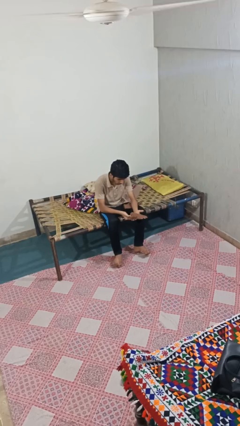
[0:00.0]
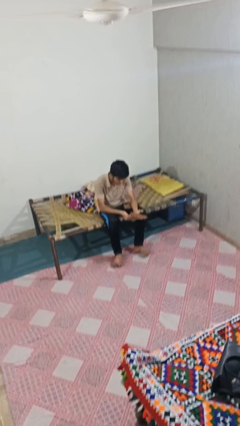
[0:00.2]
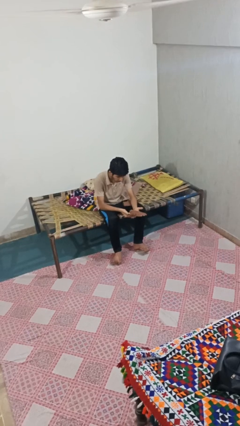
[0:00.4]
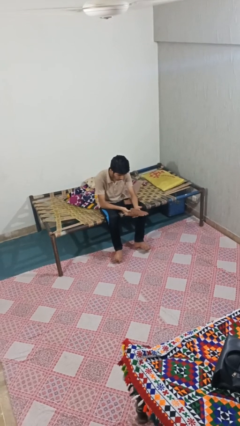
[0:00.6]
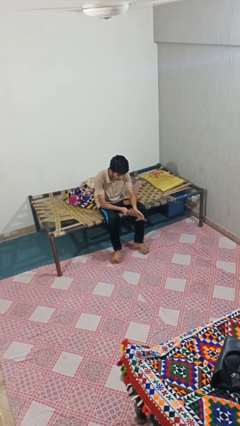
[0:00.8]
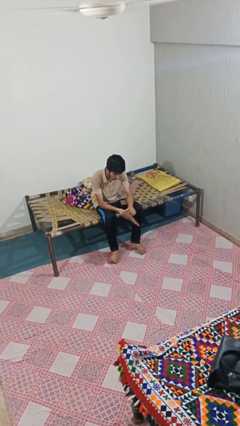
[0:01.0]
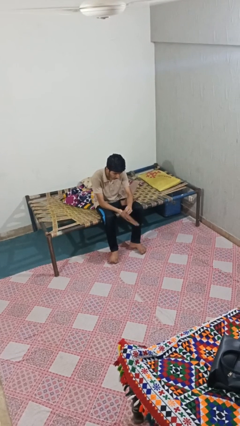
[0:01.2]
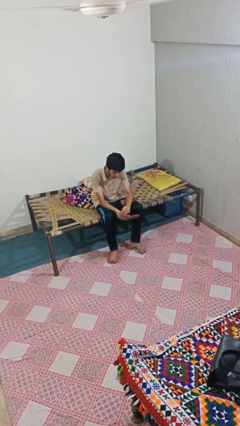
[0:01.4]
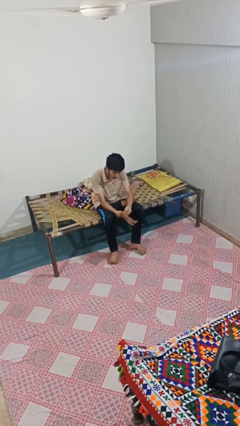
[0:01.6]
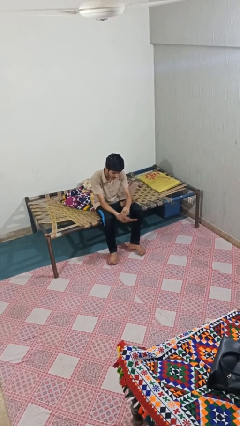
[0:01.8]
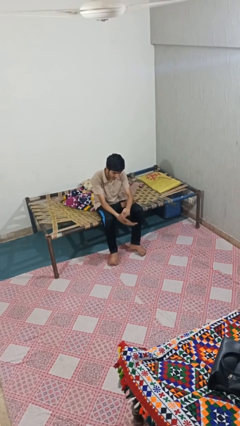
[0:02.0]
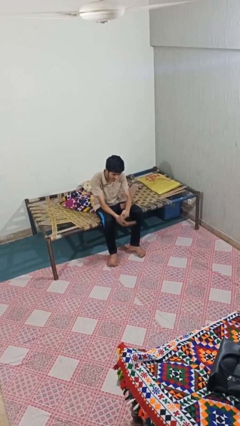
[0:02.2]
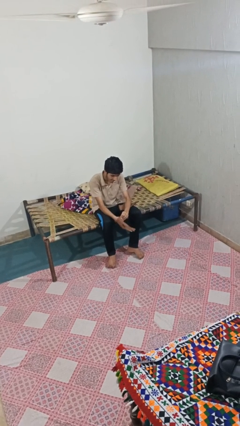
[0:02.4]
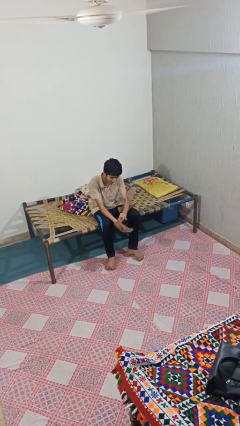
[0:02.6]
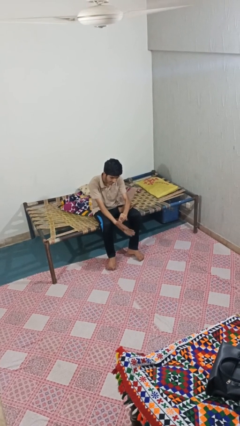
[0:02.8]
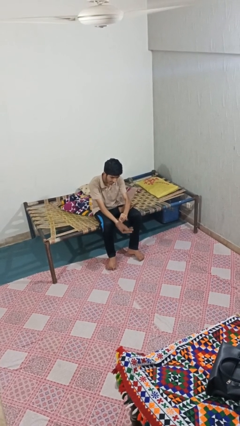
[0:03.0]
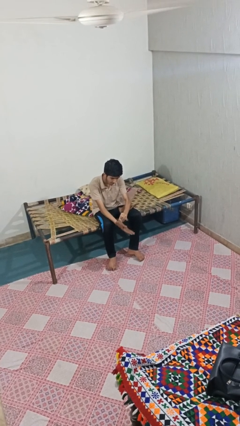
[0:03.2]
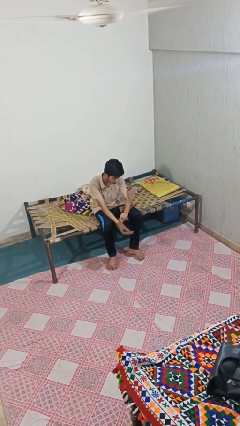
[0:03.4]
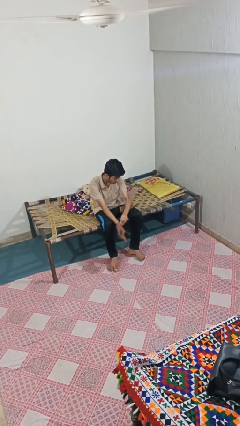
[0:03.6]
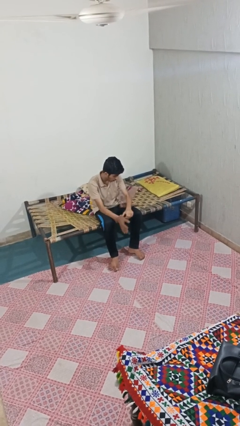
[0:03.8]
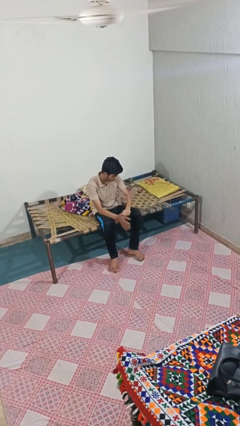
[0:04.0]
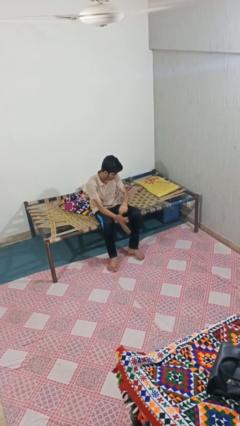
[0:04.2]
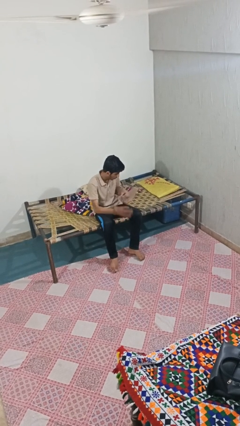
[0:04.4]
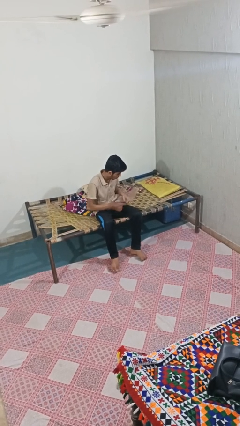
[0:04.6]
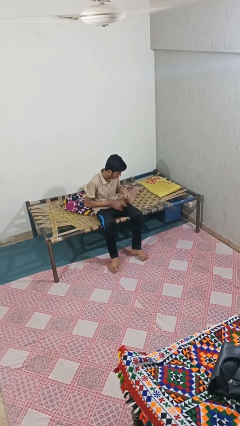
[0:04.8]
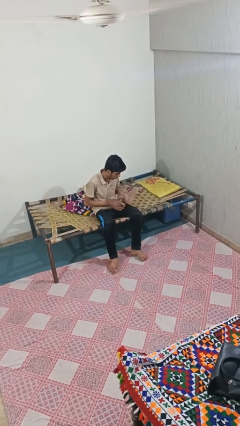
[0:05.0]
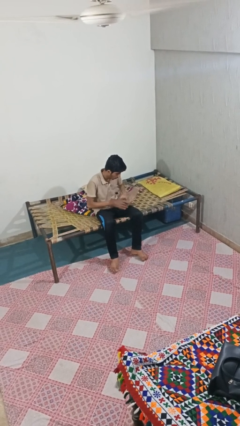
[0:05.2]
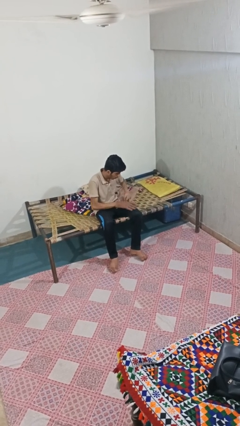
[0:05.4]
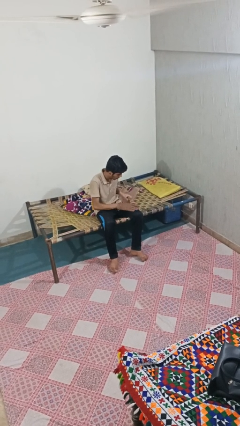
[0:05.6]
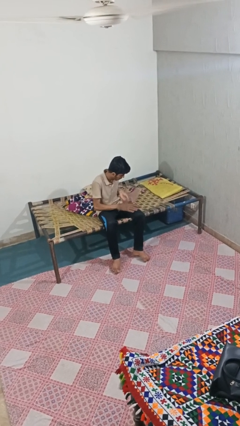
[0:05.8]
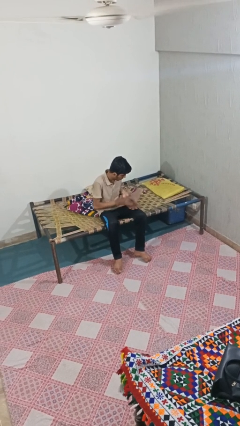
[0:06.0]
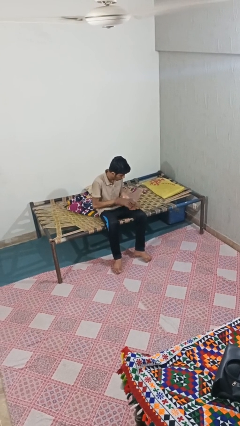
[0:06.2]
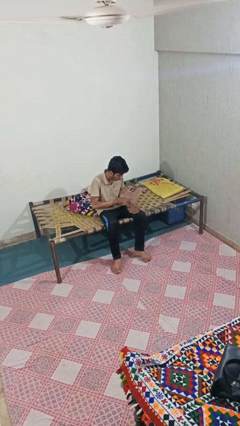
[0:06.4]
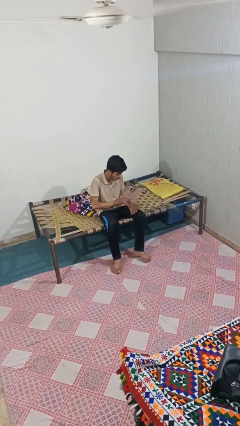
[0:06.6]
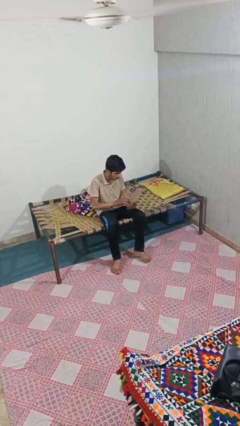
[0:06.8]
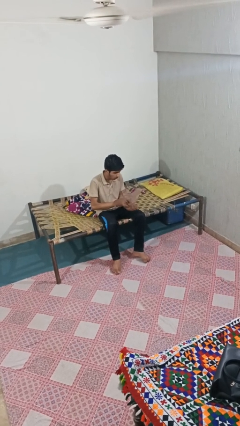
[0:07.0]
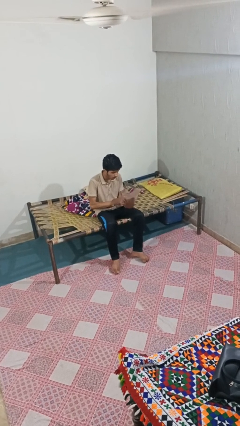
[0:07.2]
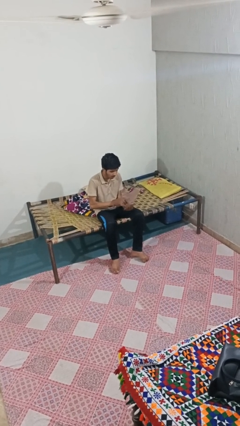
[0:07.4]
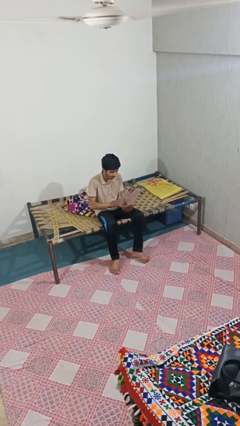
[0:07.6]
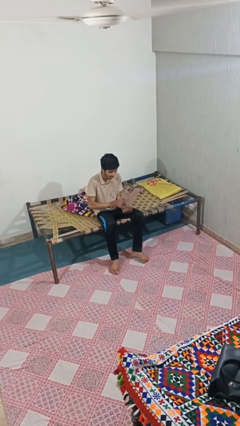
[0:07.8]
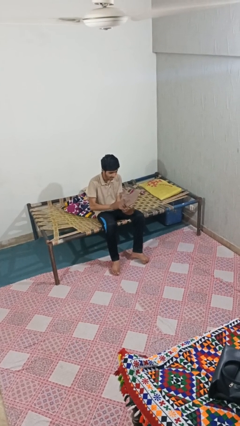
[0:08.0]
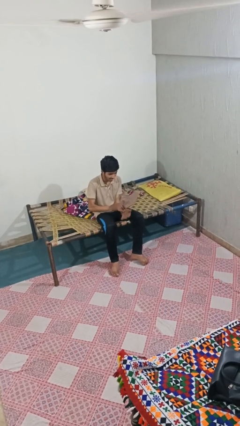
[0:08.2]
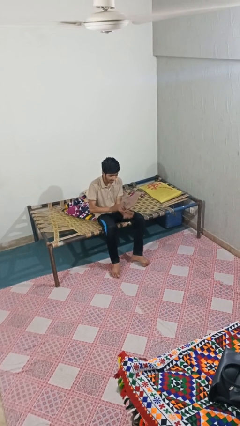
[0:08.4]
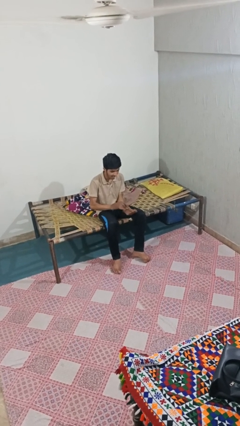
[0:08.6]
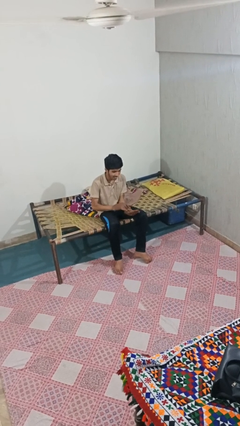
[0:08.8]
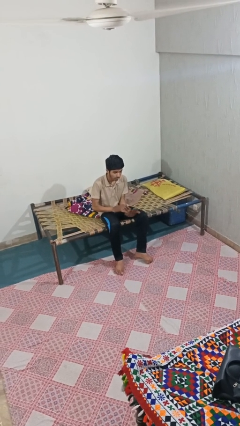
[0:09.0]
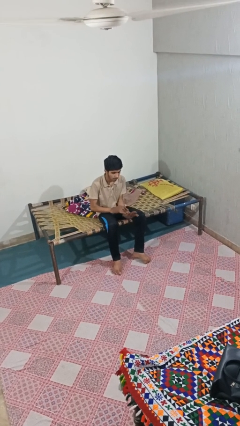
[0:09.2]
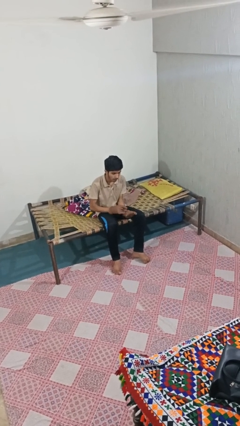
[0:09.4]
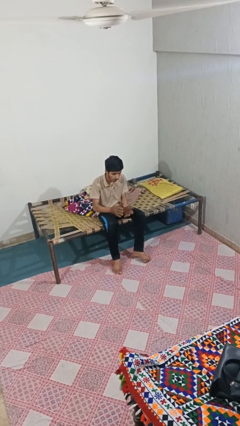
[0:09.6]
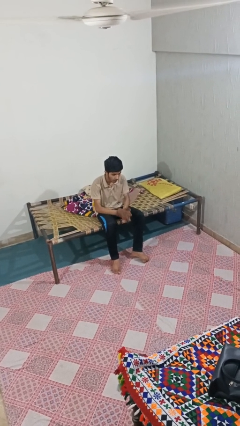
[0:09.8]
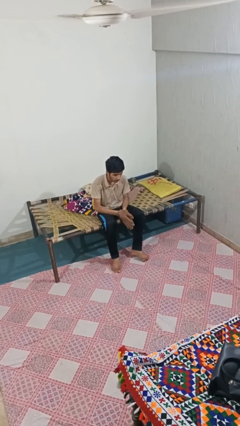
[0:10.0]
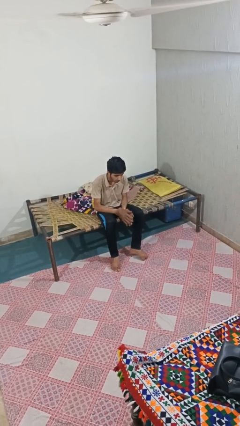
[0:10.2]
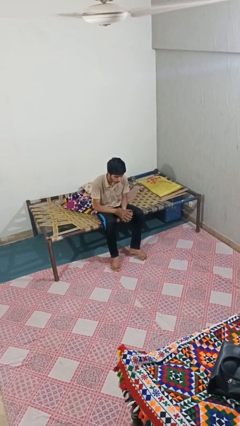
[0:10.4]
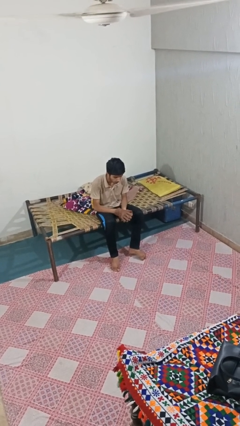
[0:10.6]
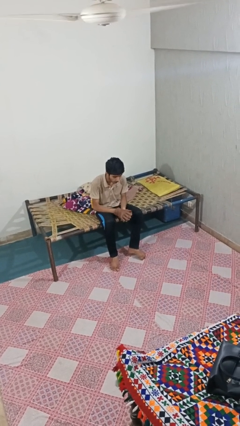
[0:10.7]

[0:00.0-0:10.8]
person puts on gloves

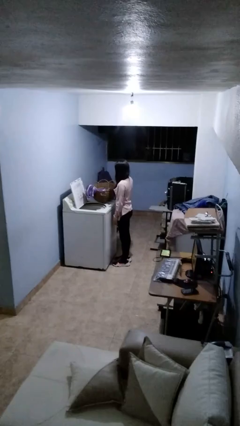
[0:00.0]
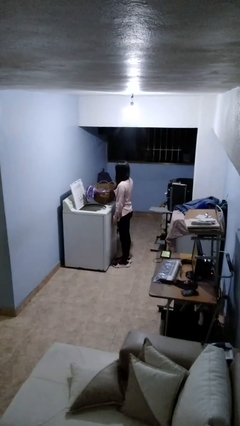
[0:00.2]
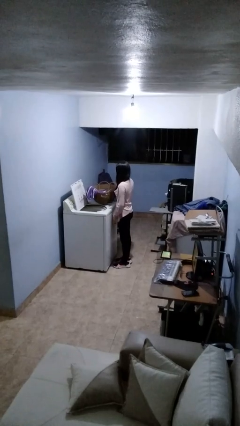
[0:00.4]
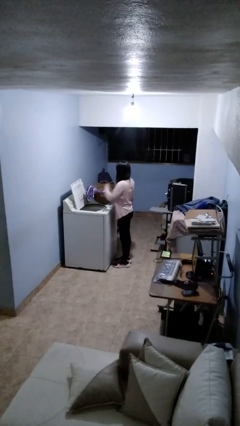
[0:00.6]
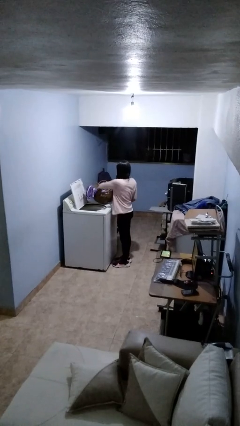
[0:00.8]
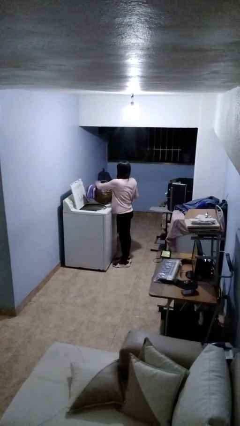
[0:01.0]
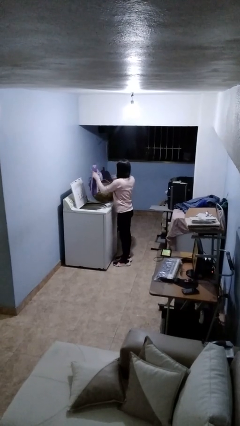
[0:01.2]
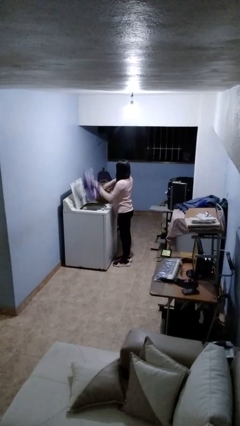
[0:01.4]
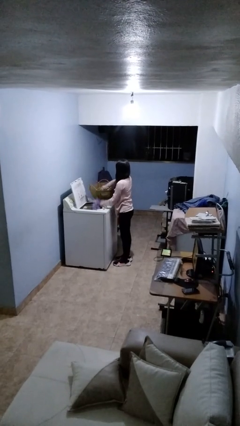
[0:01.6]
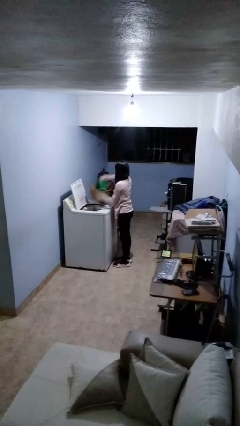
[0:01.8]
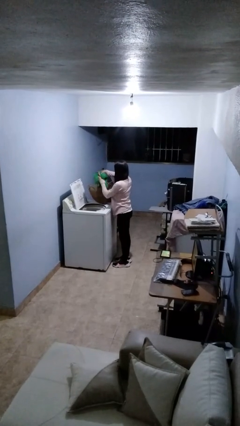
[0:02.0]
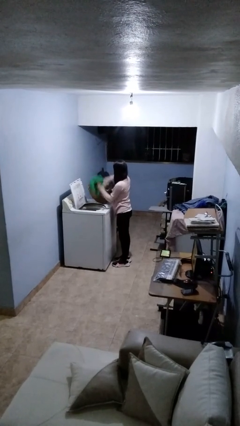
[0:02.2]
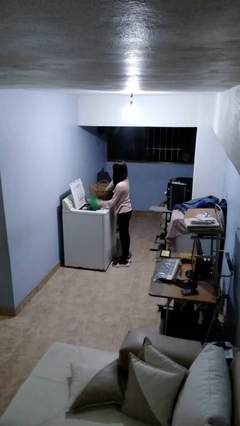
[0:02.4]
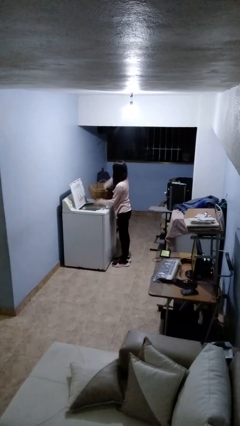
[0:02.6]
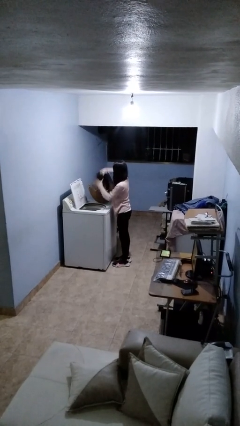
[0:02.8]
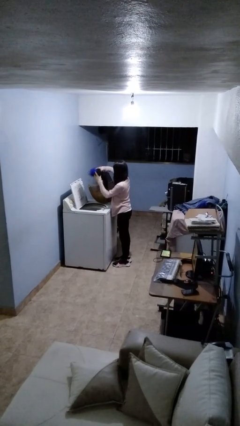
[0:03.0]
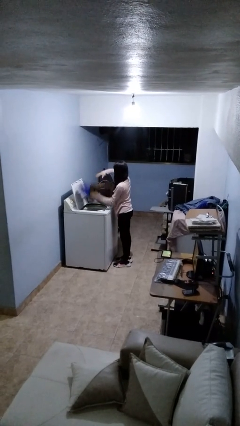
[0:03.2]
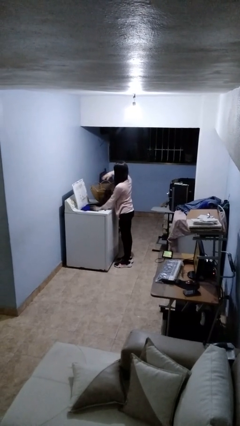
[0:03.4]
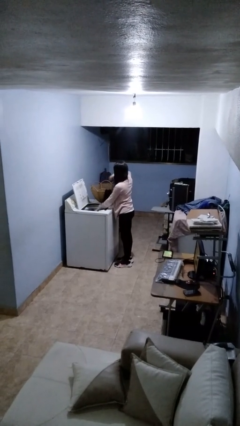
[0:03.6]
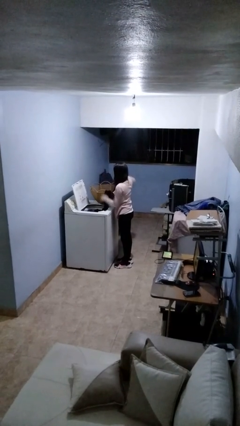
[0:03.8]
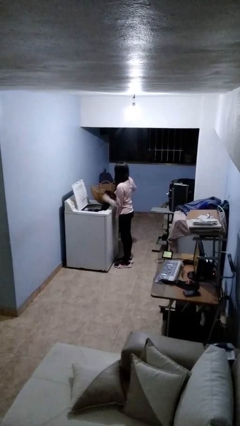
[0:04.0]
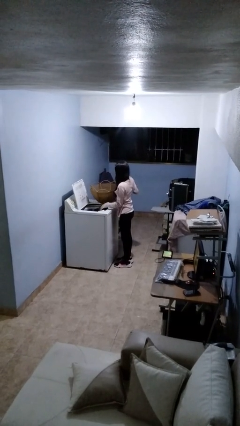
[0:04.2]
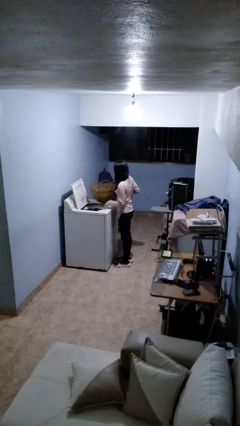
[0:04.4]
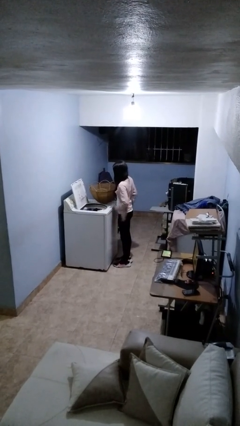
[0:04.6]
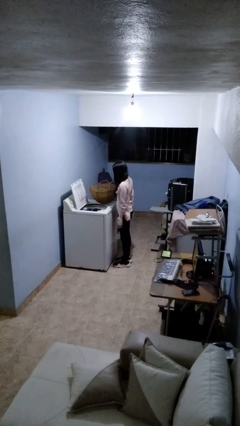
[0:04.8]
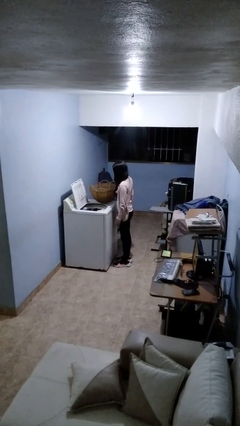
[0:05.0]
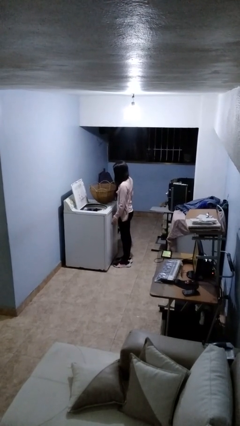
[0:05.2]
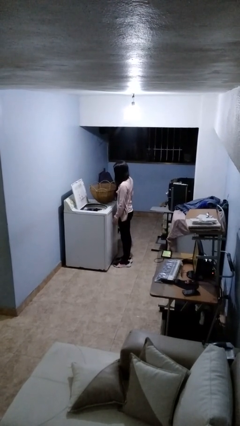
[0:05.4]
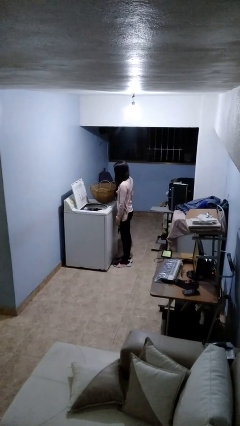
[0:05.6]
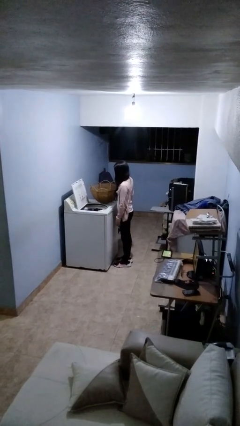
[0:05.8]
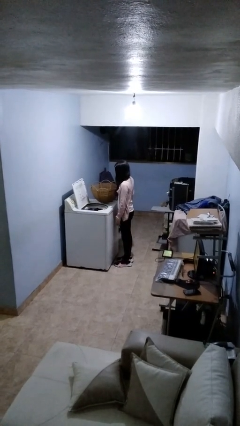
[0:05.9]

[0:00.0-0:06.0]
person unloads clotheswasher

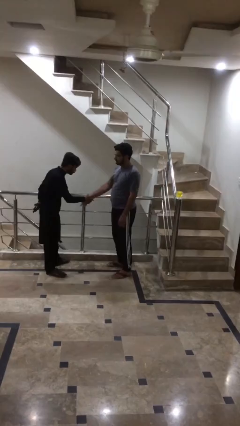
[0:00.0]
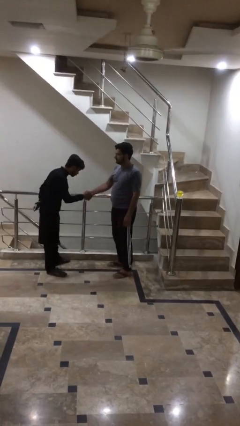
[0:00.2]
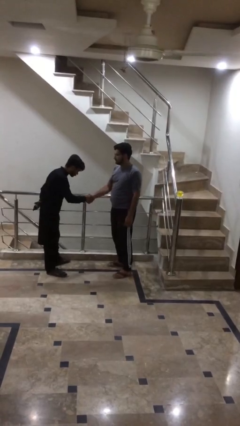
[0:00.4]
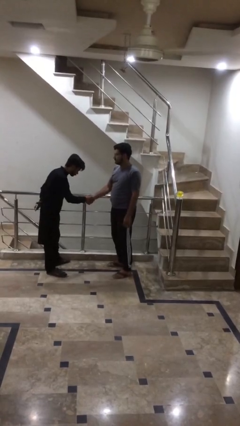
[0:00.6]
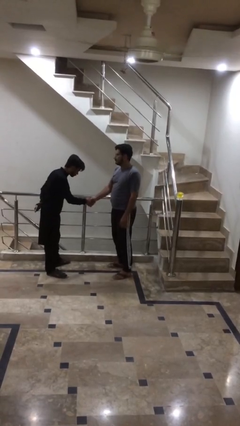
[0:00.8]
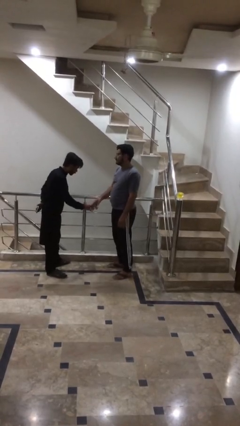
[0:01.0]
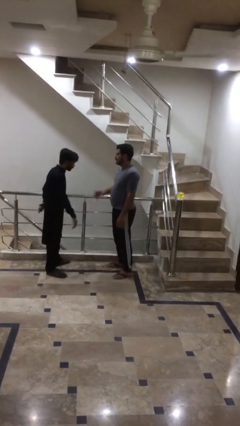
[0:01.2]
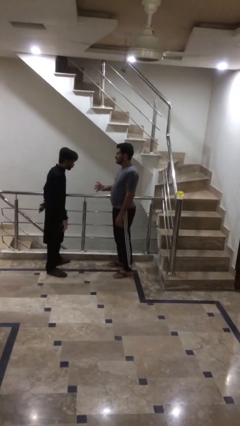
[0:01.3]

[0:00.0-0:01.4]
person shakes hand
